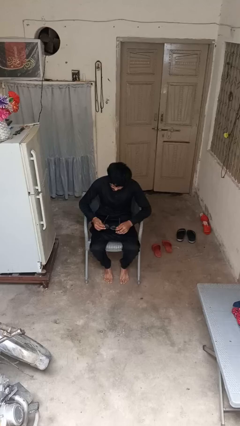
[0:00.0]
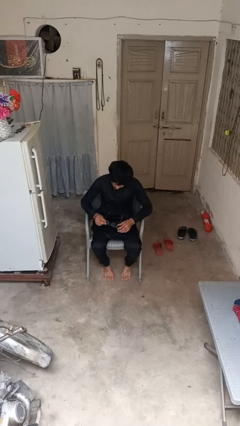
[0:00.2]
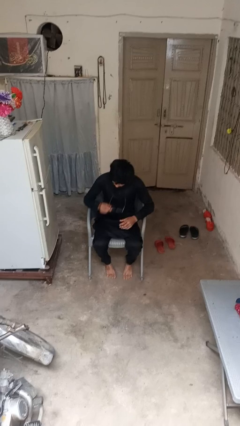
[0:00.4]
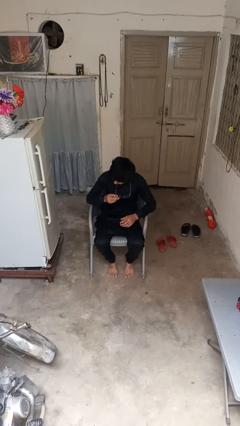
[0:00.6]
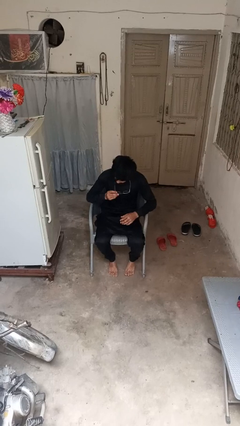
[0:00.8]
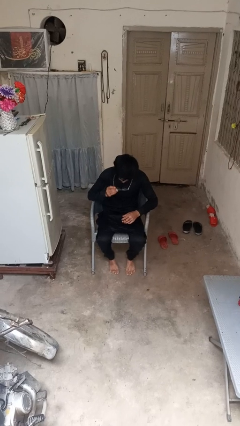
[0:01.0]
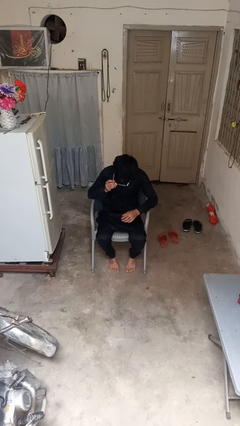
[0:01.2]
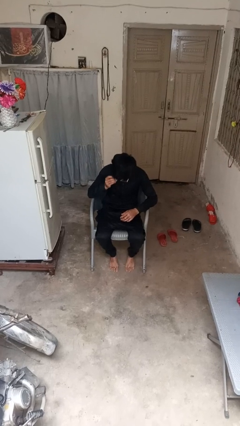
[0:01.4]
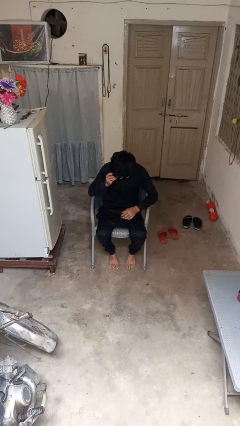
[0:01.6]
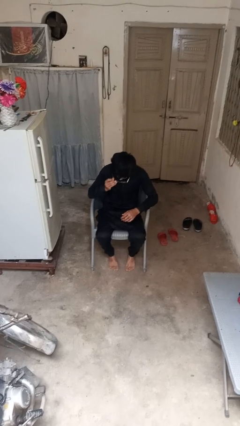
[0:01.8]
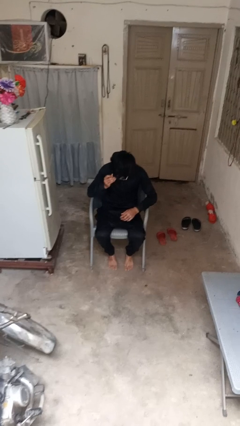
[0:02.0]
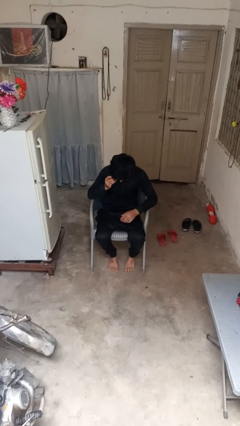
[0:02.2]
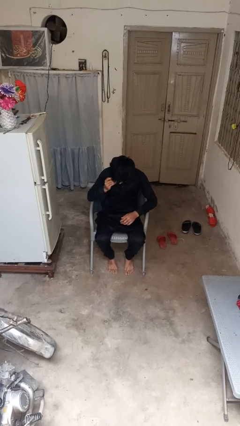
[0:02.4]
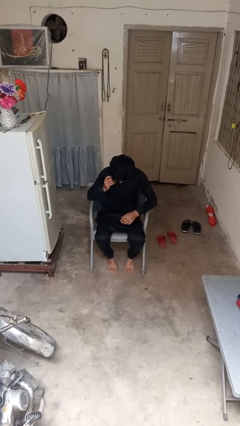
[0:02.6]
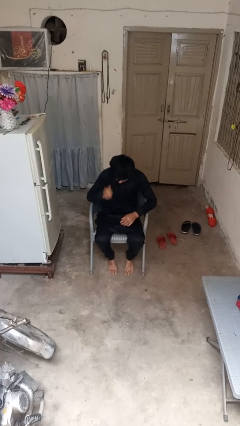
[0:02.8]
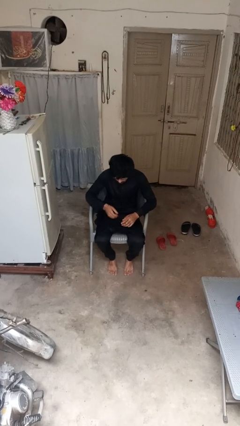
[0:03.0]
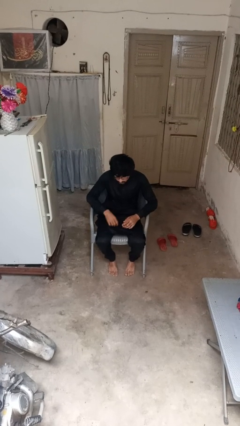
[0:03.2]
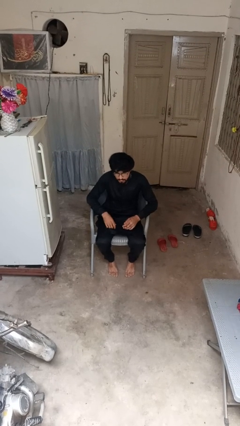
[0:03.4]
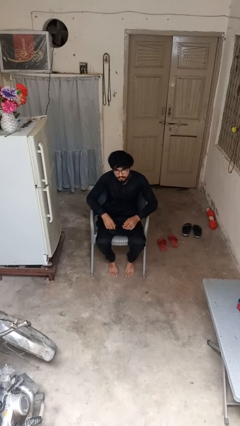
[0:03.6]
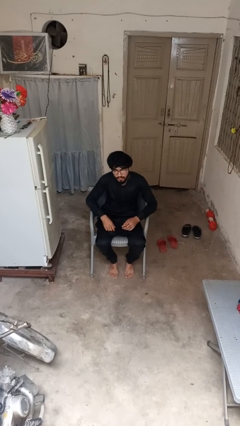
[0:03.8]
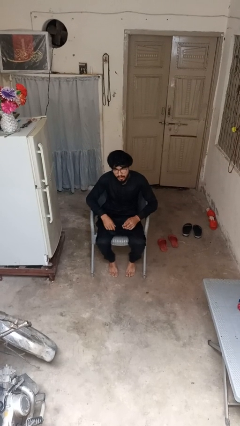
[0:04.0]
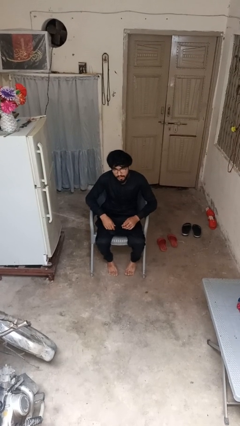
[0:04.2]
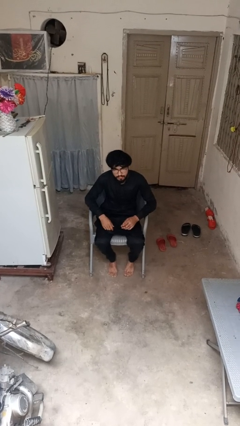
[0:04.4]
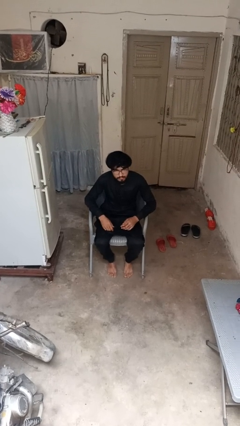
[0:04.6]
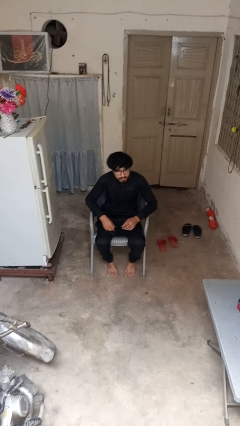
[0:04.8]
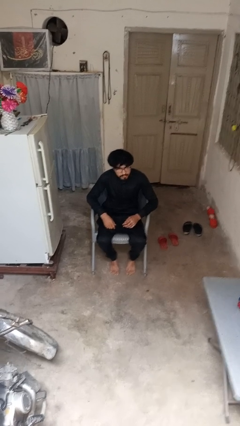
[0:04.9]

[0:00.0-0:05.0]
person puts on glasses

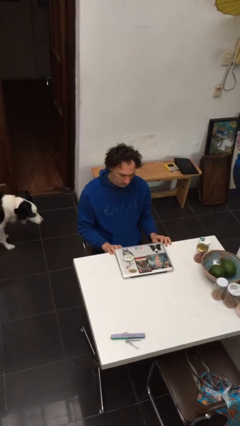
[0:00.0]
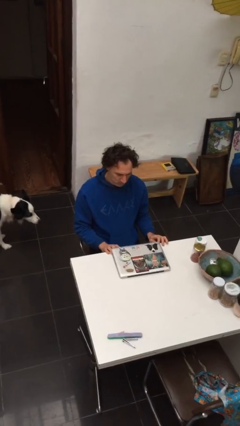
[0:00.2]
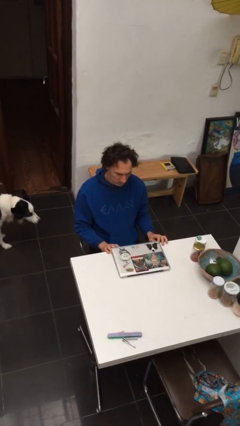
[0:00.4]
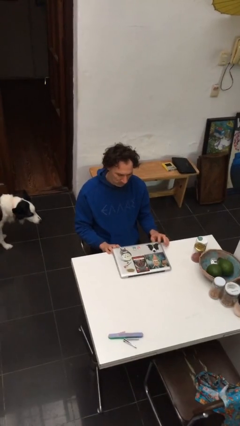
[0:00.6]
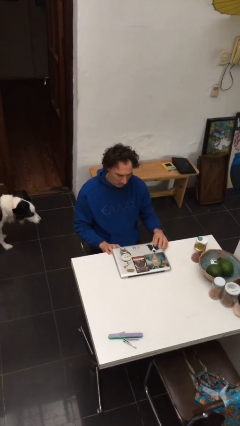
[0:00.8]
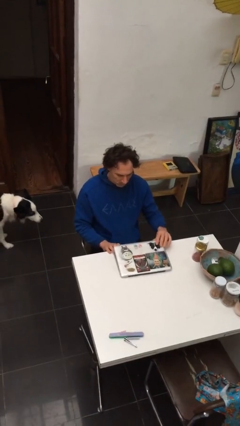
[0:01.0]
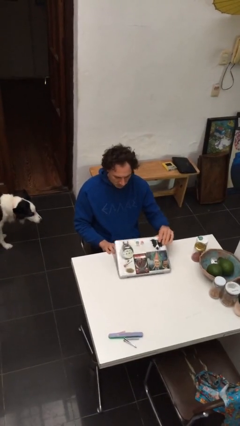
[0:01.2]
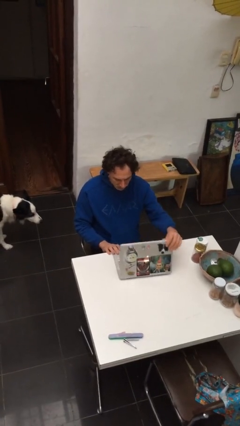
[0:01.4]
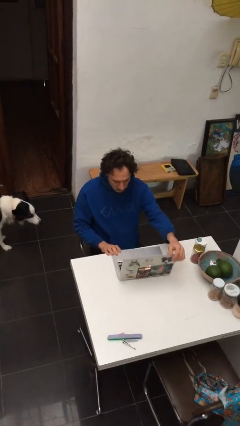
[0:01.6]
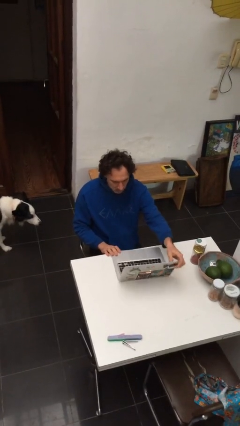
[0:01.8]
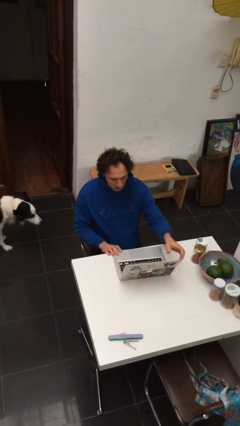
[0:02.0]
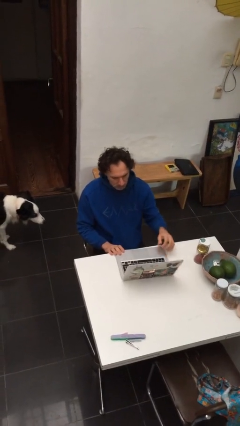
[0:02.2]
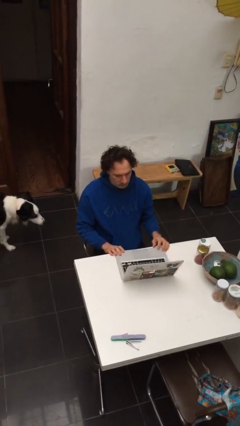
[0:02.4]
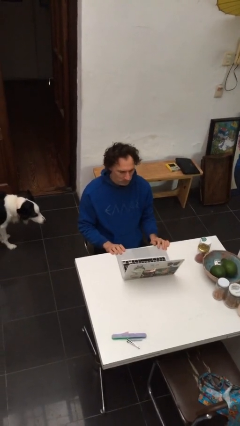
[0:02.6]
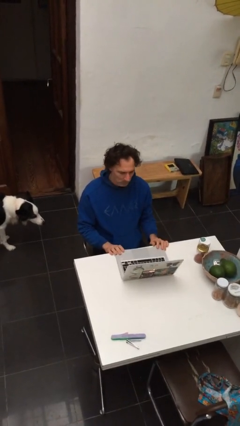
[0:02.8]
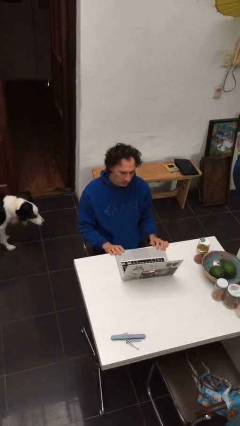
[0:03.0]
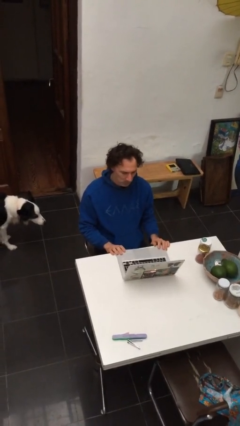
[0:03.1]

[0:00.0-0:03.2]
person opens laptop

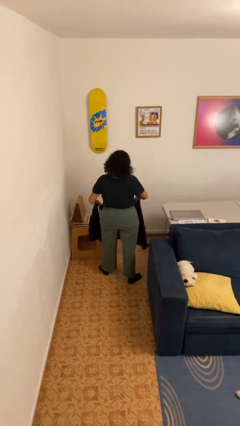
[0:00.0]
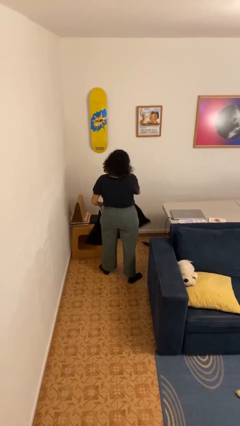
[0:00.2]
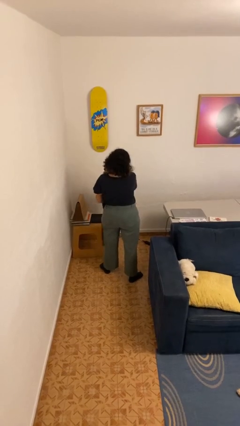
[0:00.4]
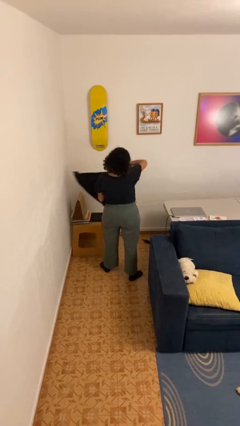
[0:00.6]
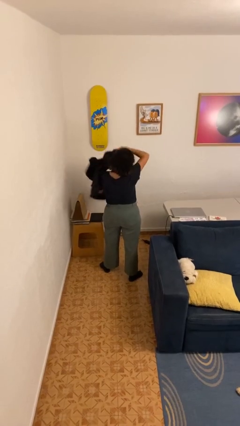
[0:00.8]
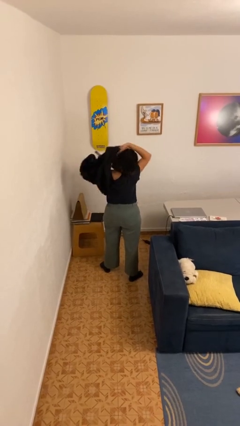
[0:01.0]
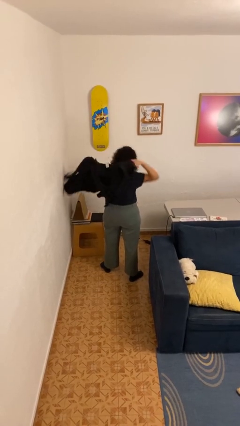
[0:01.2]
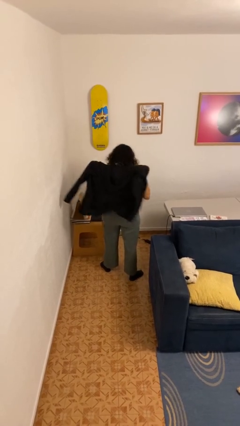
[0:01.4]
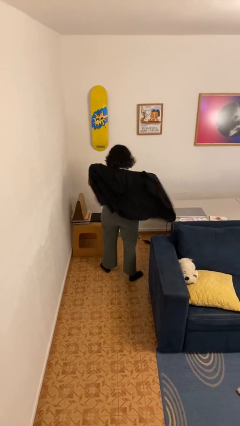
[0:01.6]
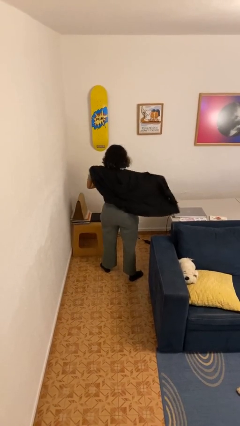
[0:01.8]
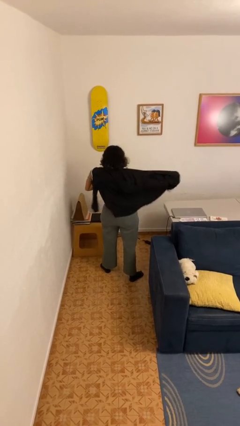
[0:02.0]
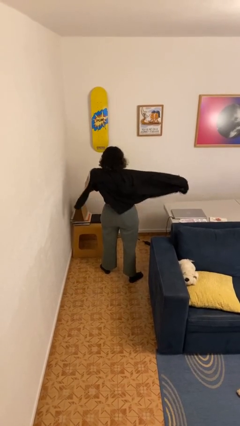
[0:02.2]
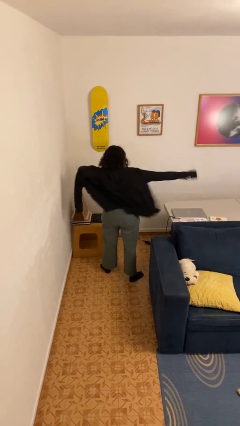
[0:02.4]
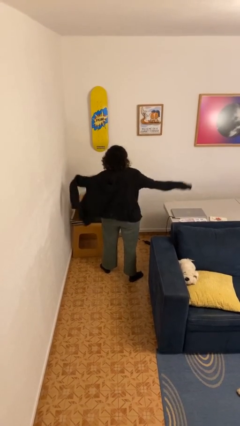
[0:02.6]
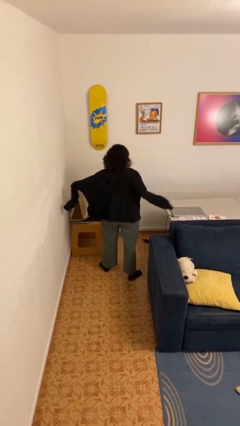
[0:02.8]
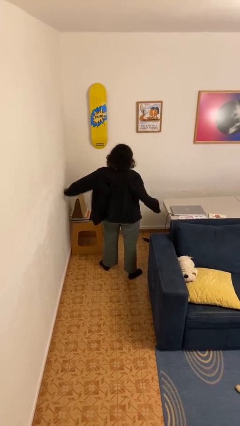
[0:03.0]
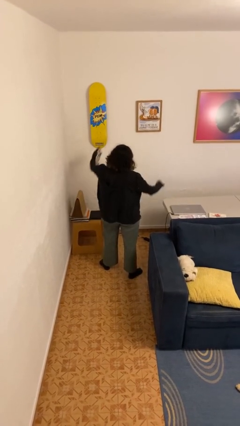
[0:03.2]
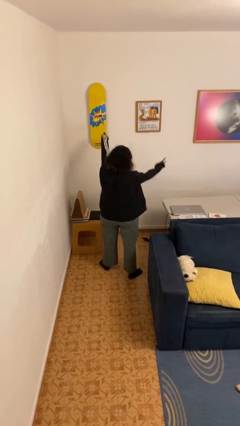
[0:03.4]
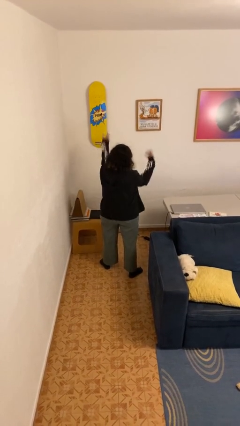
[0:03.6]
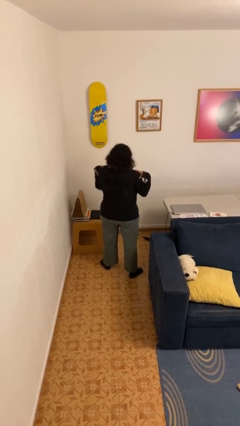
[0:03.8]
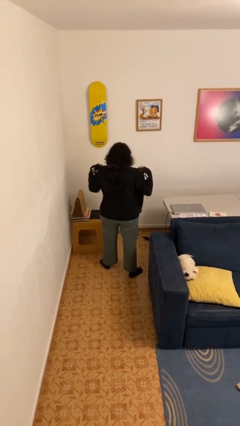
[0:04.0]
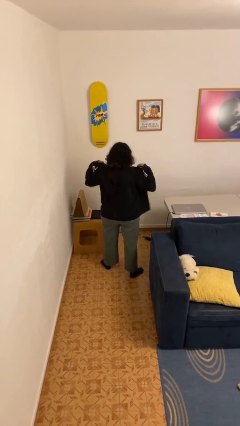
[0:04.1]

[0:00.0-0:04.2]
person puts on hoodie

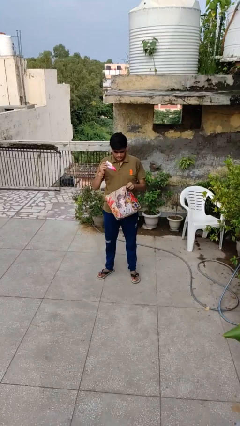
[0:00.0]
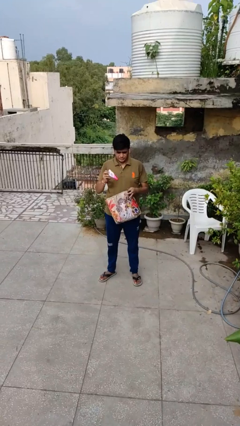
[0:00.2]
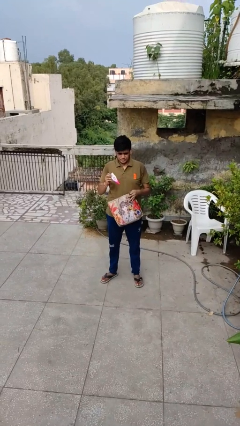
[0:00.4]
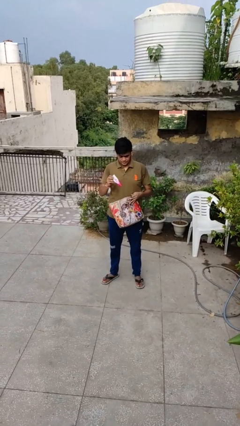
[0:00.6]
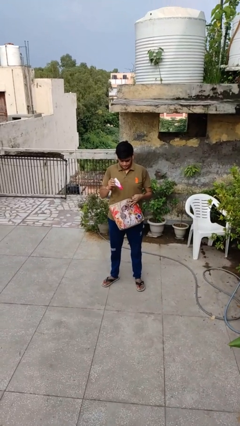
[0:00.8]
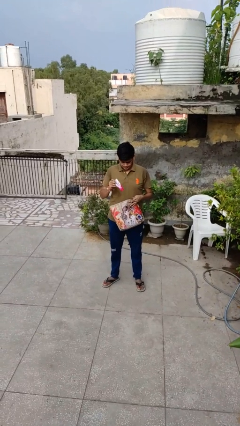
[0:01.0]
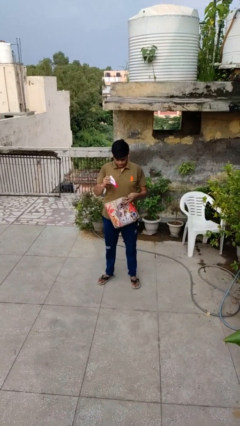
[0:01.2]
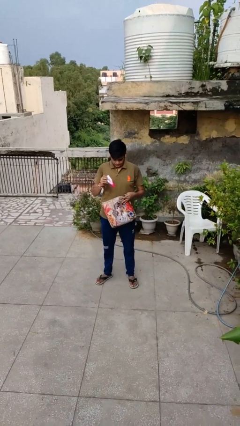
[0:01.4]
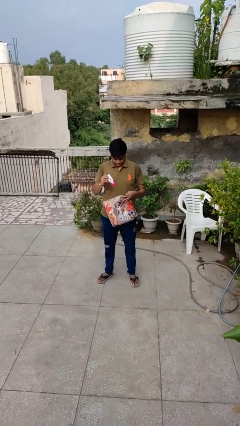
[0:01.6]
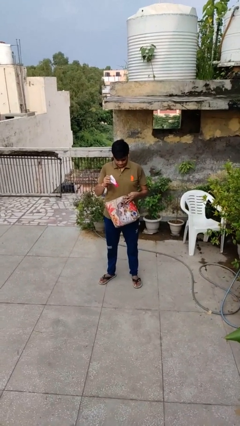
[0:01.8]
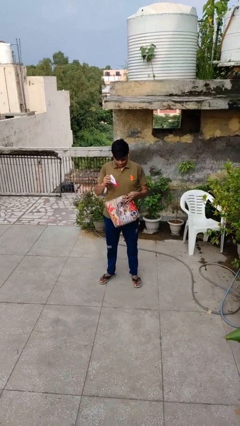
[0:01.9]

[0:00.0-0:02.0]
person takes object from purse

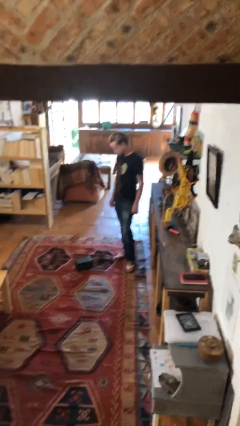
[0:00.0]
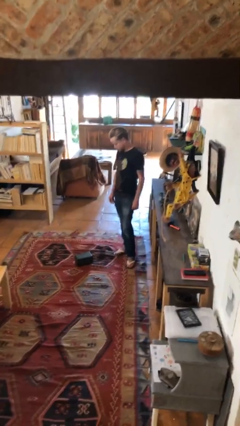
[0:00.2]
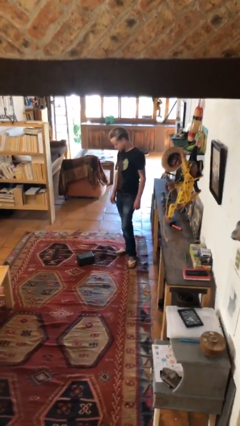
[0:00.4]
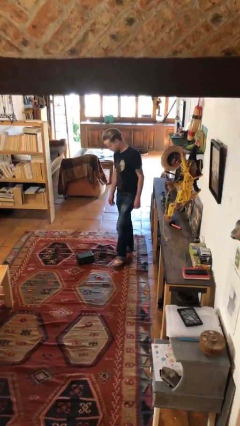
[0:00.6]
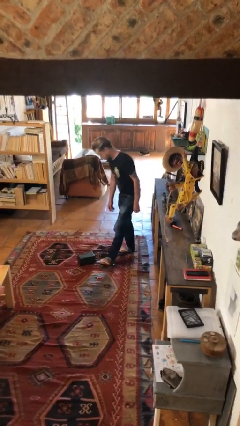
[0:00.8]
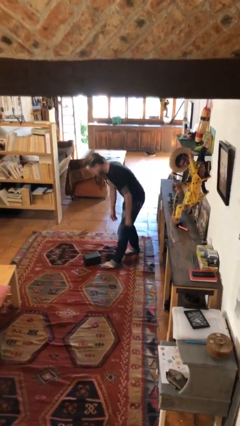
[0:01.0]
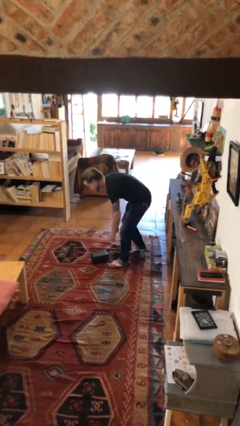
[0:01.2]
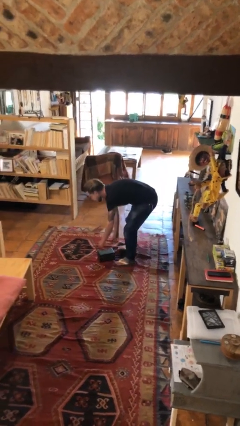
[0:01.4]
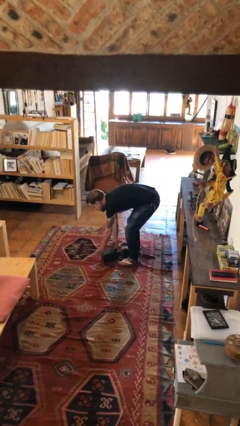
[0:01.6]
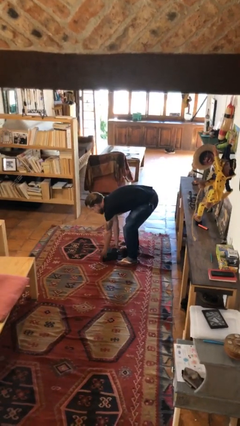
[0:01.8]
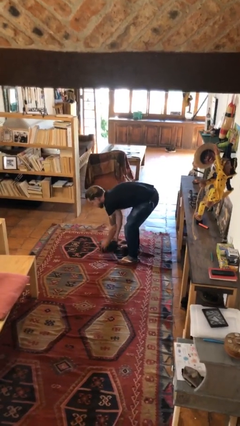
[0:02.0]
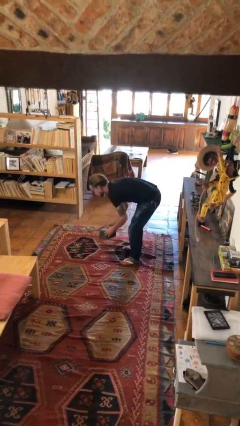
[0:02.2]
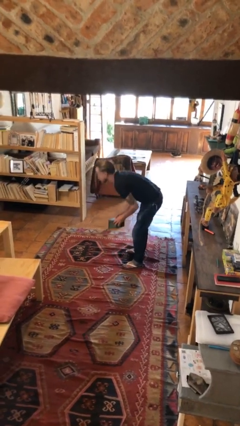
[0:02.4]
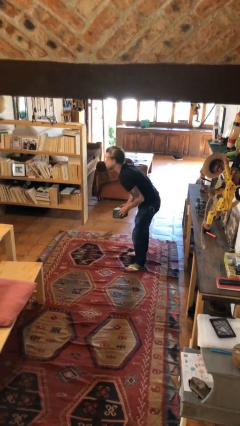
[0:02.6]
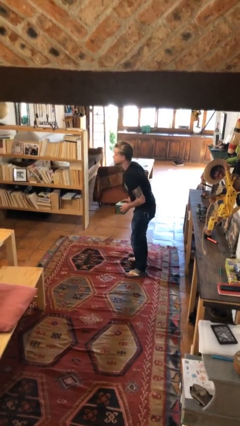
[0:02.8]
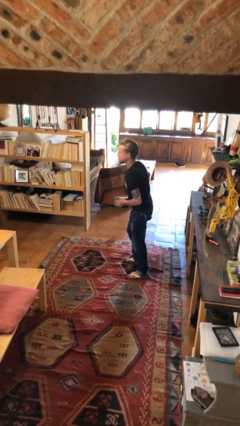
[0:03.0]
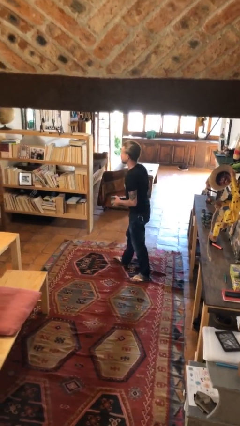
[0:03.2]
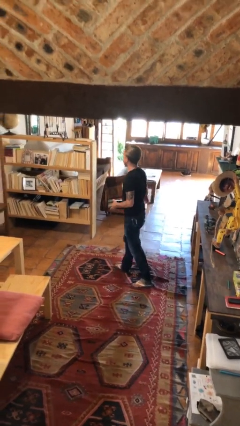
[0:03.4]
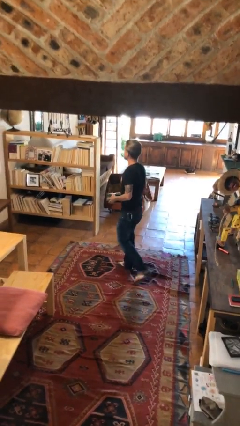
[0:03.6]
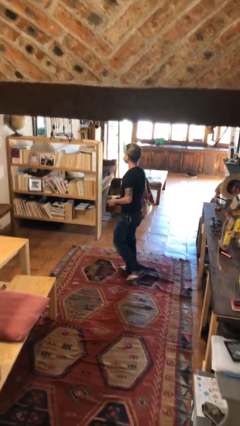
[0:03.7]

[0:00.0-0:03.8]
person picks up object from floor
